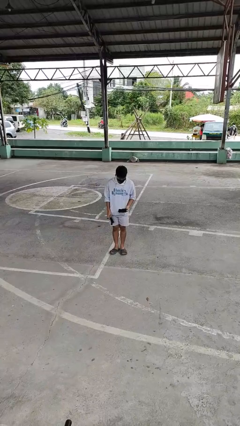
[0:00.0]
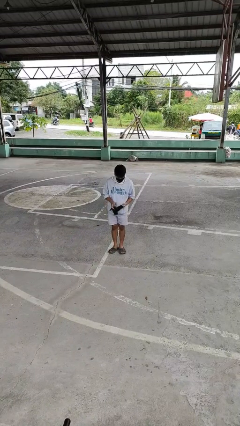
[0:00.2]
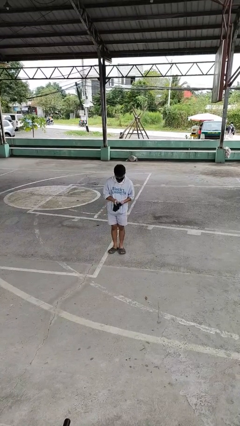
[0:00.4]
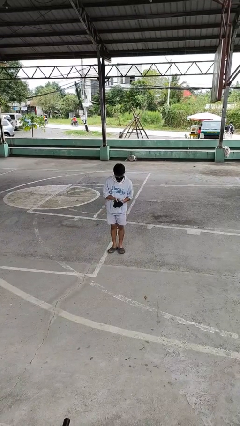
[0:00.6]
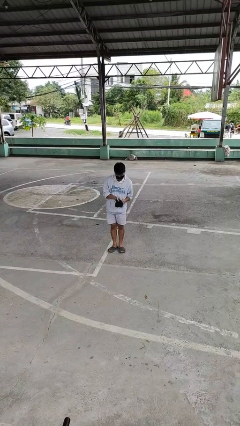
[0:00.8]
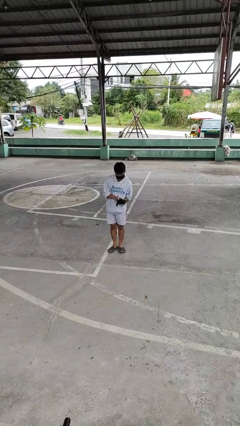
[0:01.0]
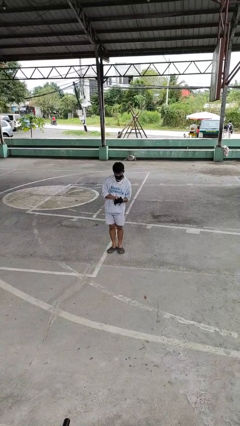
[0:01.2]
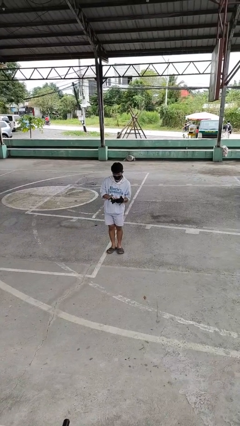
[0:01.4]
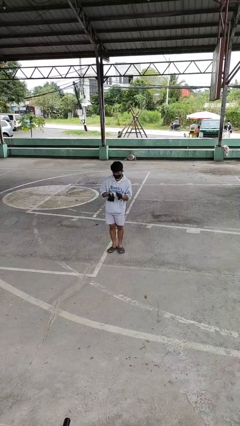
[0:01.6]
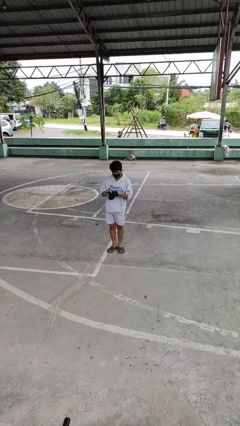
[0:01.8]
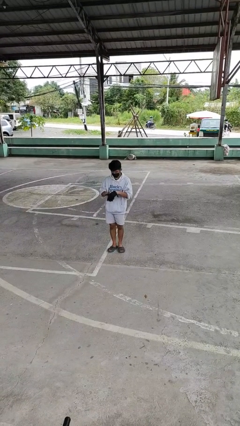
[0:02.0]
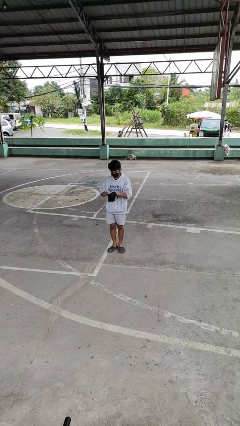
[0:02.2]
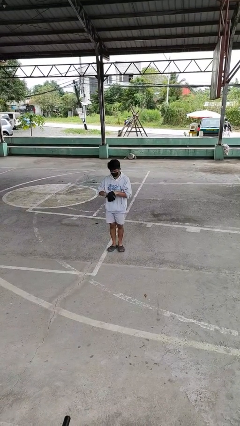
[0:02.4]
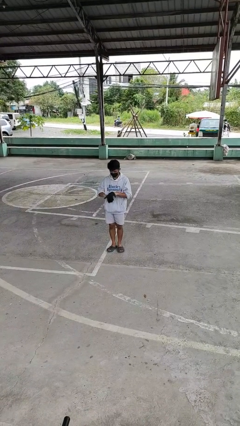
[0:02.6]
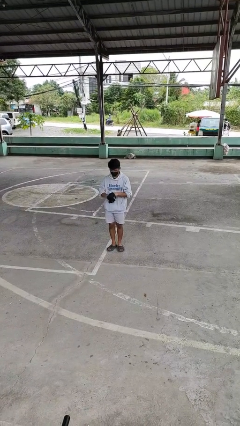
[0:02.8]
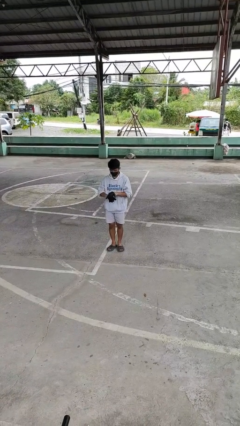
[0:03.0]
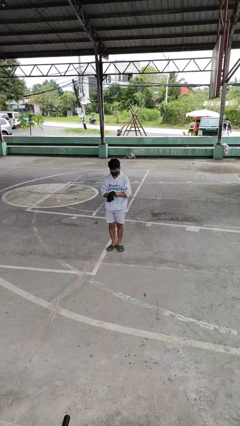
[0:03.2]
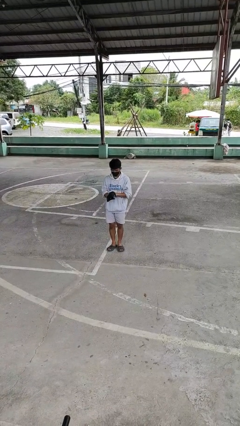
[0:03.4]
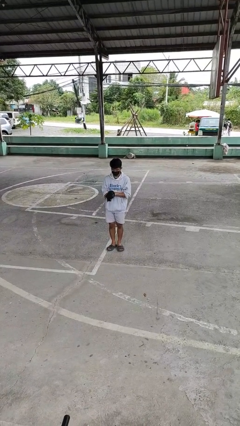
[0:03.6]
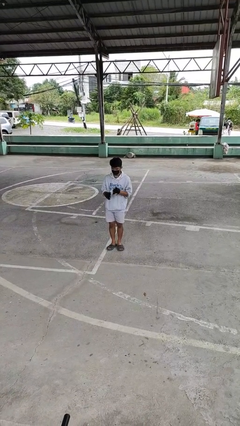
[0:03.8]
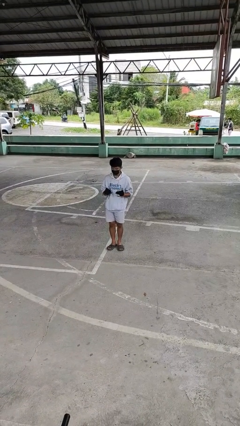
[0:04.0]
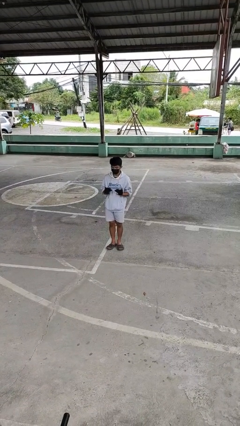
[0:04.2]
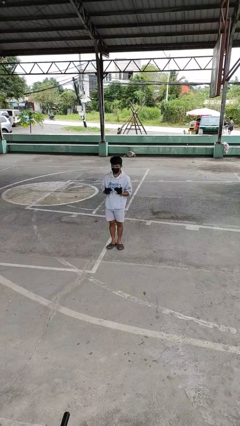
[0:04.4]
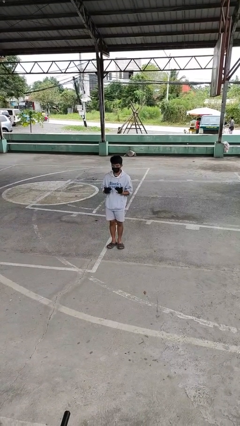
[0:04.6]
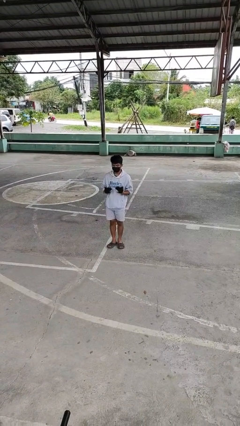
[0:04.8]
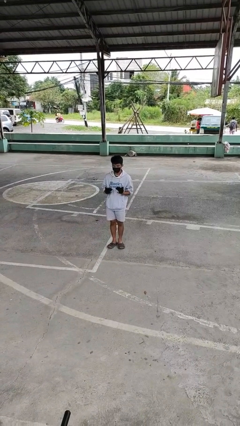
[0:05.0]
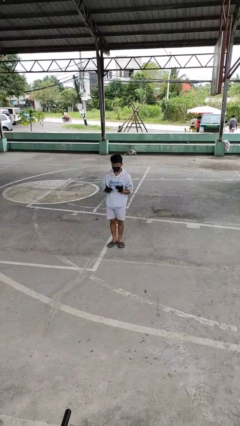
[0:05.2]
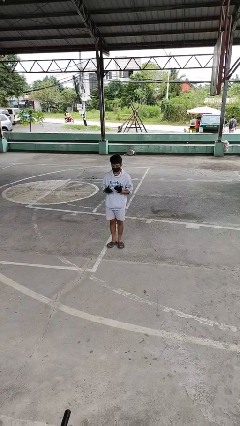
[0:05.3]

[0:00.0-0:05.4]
person puts on gloves

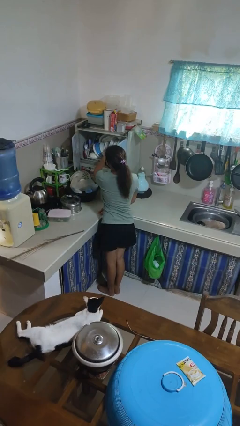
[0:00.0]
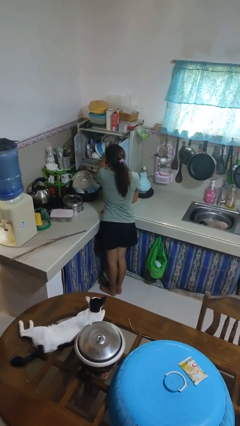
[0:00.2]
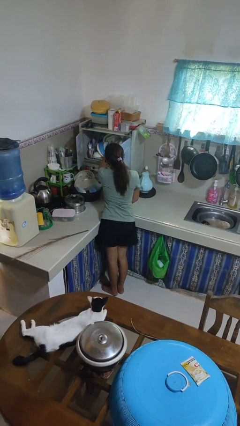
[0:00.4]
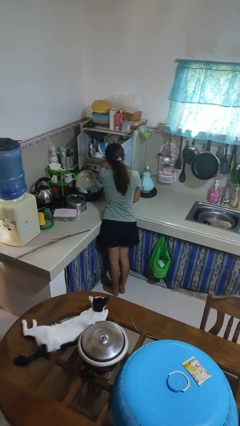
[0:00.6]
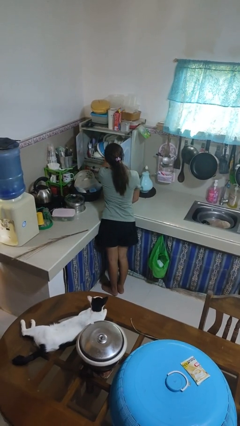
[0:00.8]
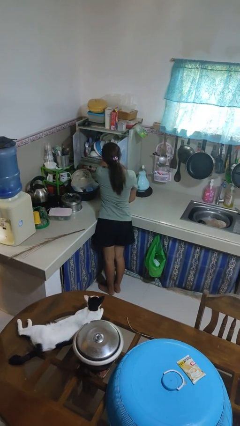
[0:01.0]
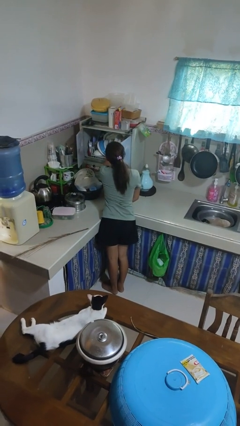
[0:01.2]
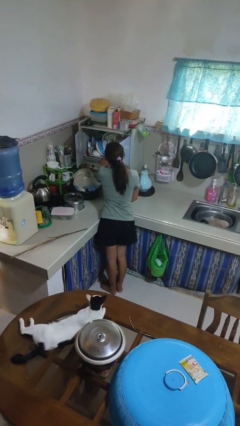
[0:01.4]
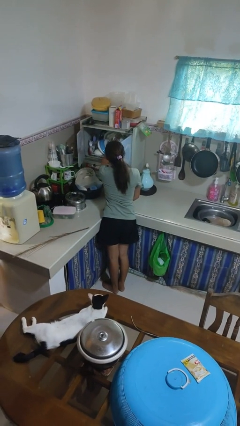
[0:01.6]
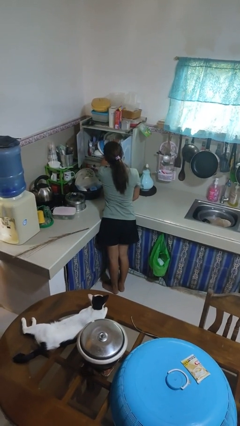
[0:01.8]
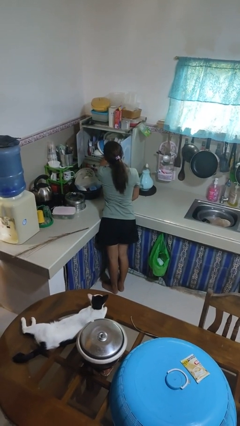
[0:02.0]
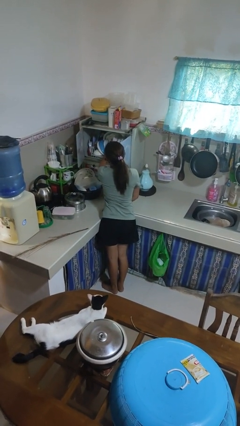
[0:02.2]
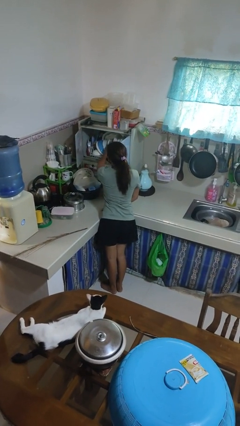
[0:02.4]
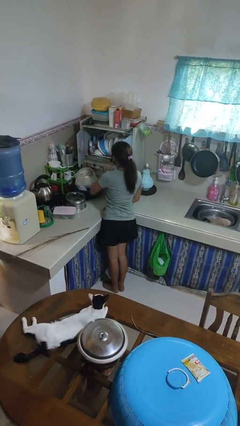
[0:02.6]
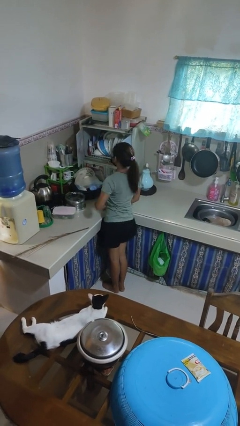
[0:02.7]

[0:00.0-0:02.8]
person searches in kitchen drawer

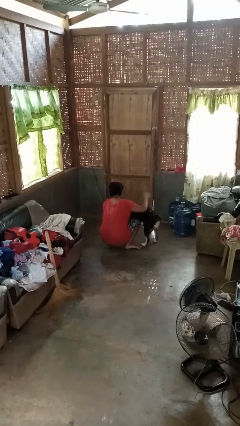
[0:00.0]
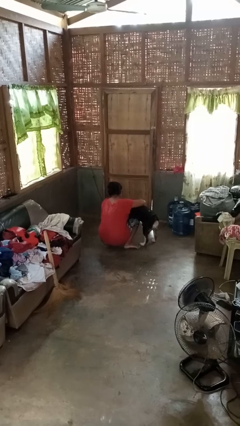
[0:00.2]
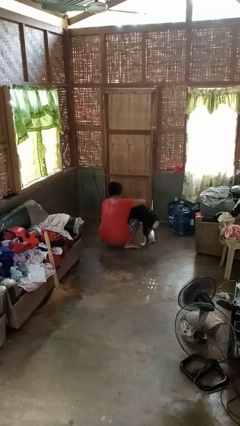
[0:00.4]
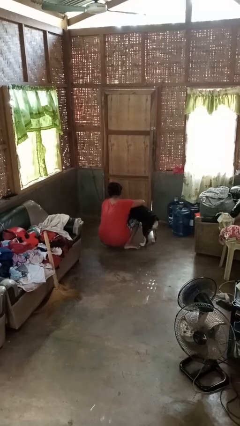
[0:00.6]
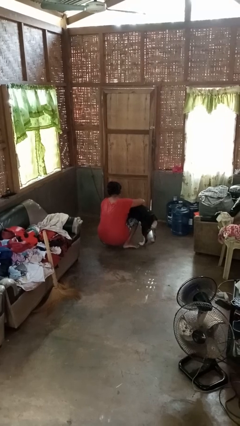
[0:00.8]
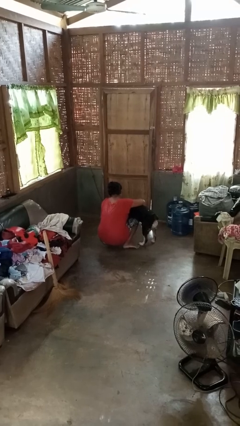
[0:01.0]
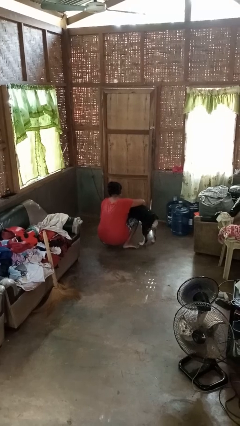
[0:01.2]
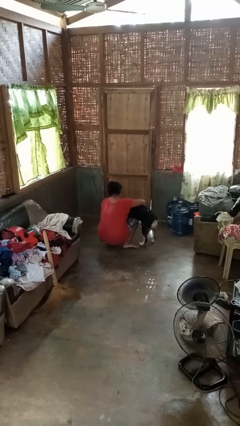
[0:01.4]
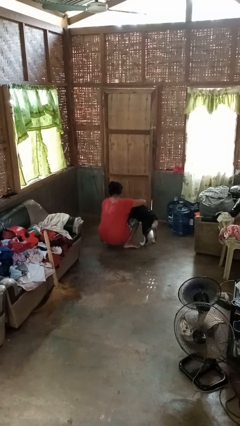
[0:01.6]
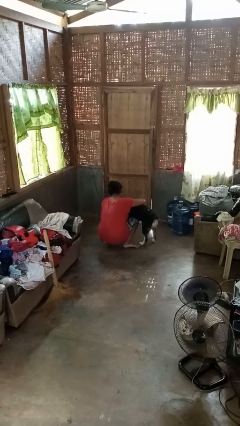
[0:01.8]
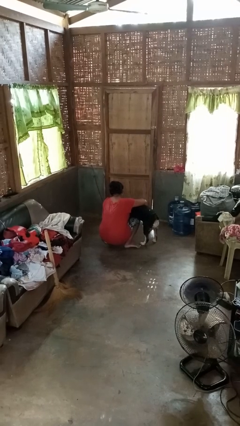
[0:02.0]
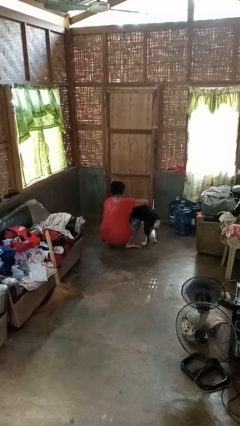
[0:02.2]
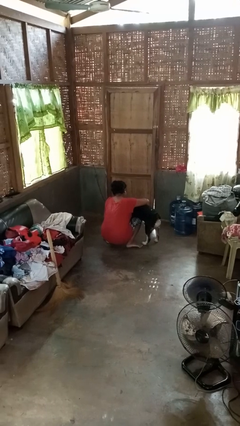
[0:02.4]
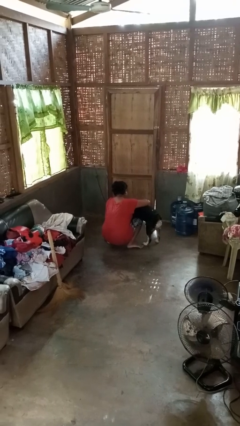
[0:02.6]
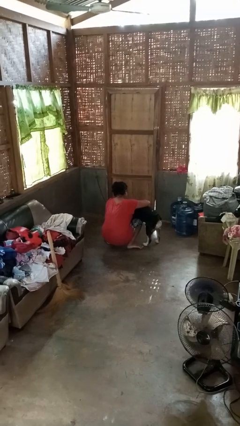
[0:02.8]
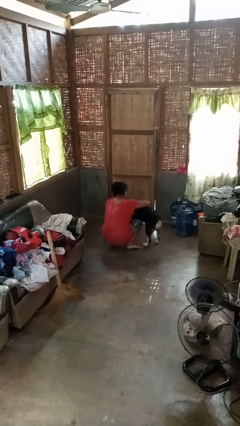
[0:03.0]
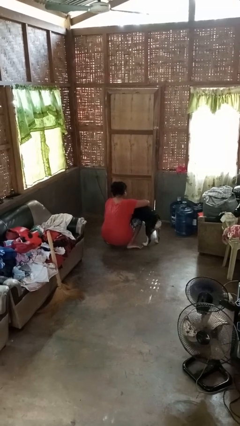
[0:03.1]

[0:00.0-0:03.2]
person hugs dog

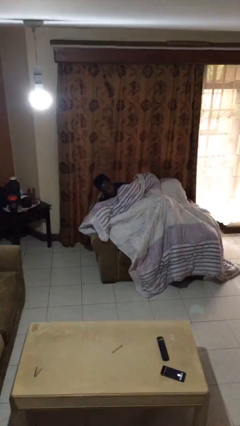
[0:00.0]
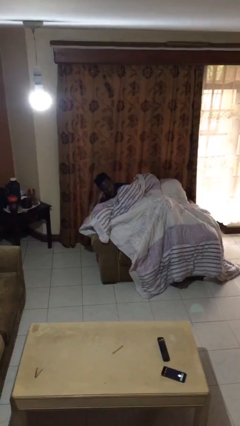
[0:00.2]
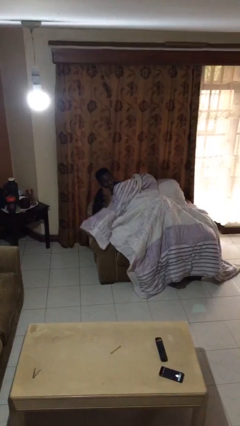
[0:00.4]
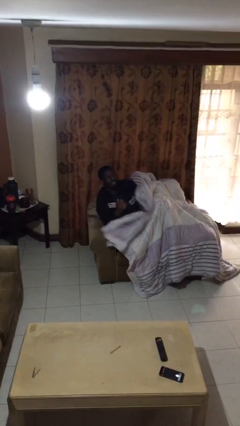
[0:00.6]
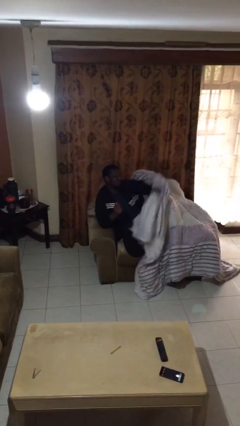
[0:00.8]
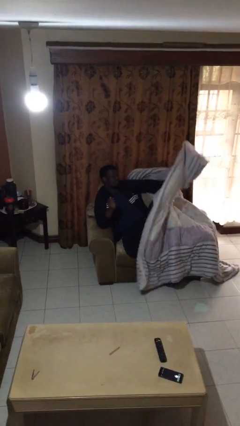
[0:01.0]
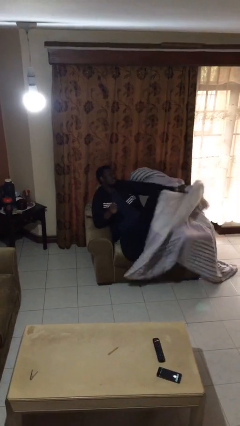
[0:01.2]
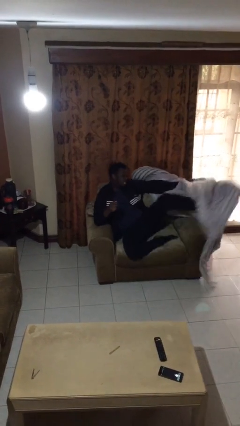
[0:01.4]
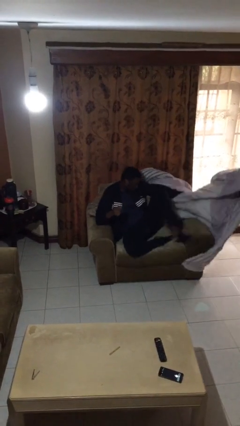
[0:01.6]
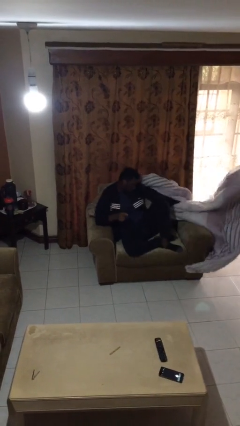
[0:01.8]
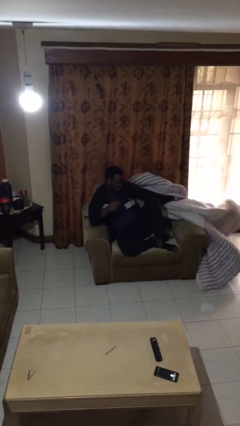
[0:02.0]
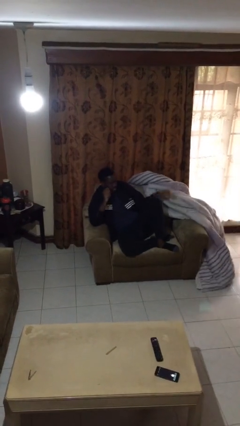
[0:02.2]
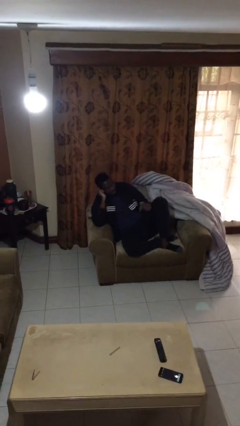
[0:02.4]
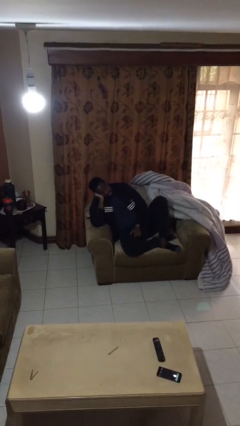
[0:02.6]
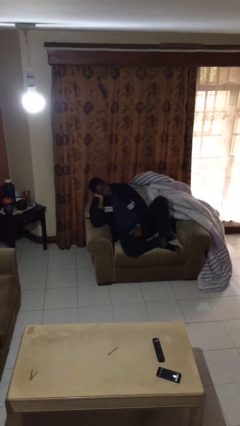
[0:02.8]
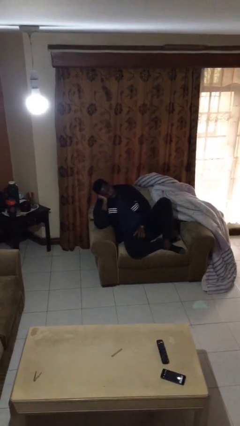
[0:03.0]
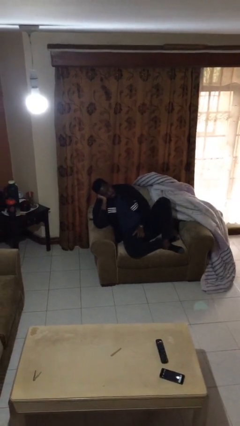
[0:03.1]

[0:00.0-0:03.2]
person uncovers with blanket

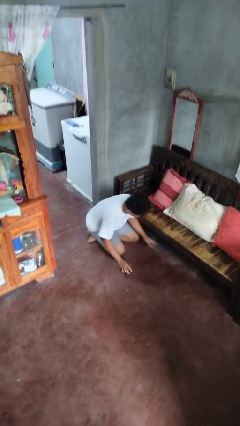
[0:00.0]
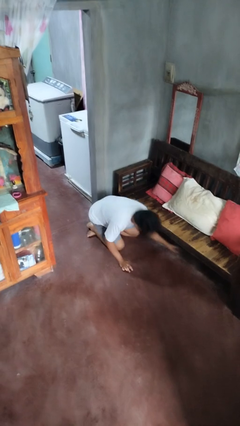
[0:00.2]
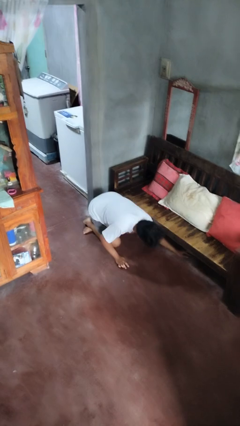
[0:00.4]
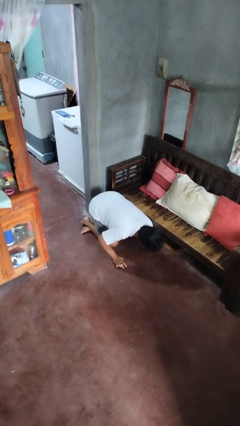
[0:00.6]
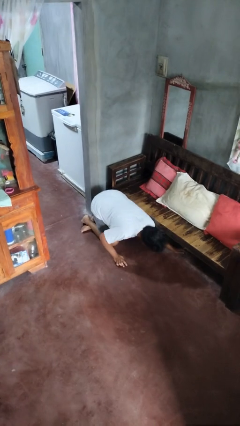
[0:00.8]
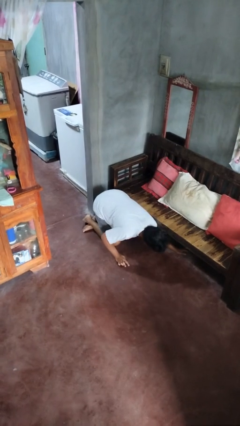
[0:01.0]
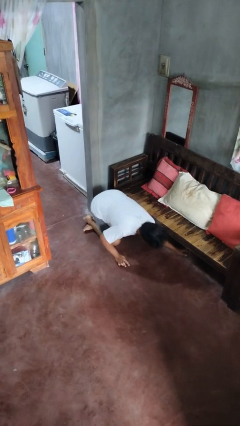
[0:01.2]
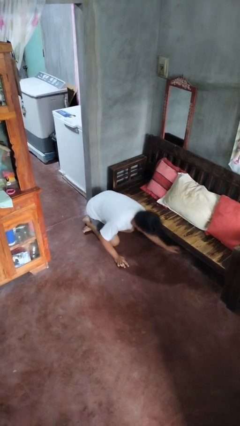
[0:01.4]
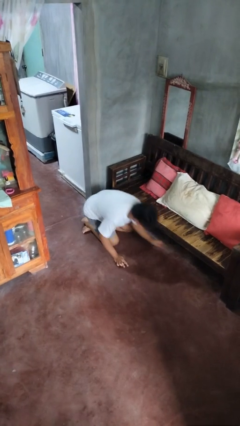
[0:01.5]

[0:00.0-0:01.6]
person searches under couch

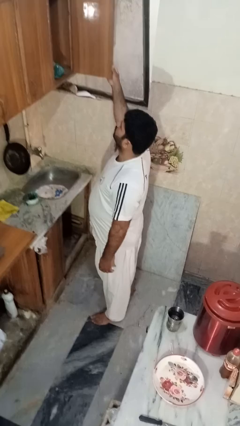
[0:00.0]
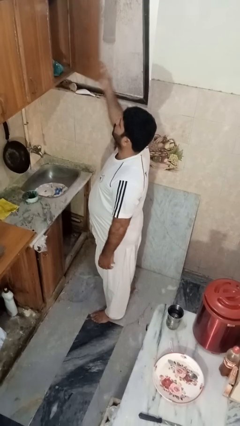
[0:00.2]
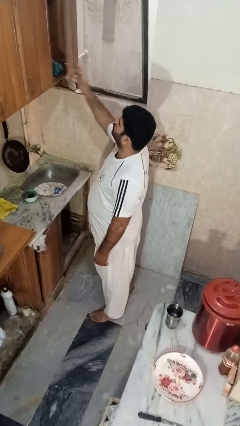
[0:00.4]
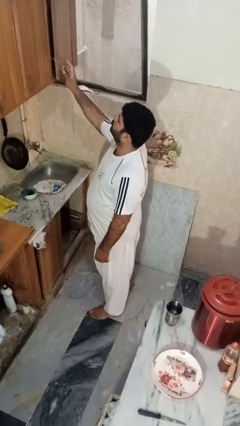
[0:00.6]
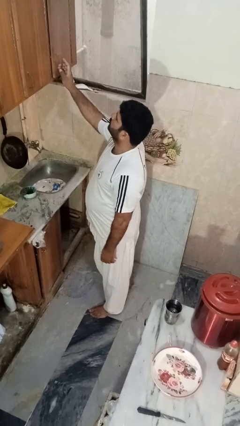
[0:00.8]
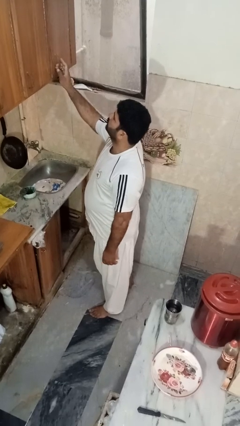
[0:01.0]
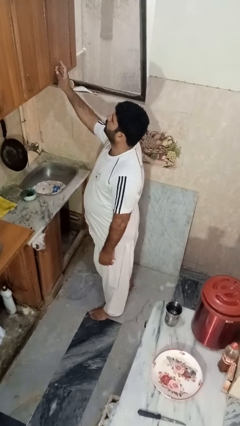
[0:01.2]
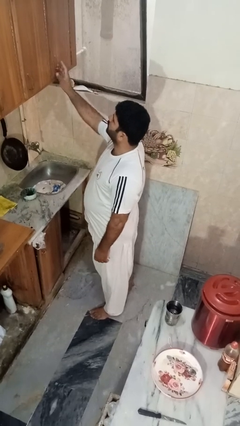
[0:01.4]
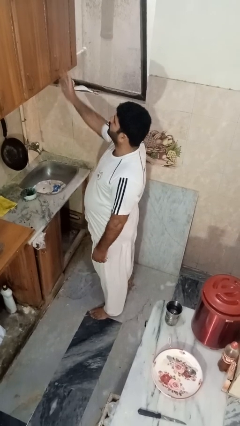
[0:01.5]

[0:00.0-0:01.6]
person closes cabinet
